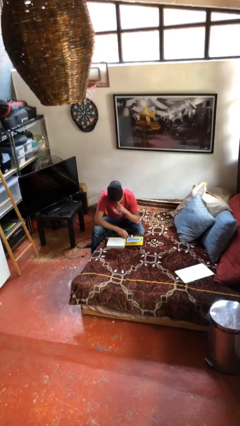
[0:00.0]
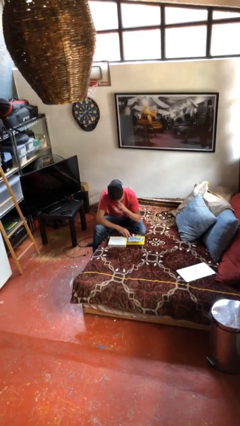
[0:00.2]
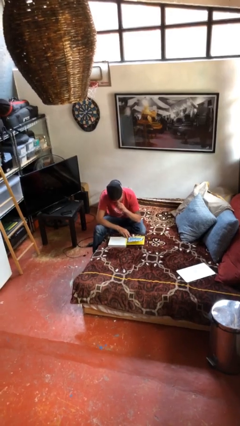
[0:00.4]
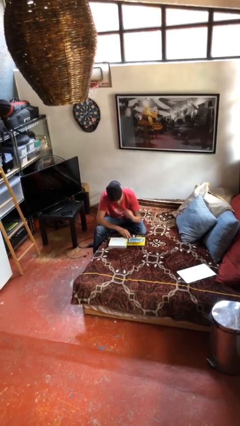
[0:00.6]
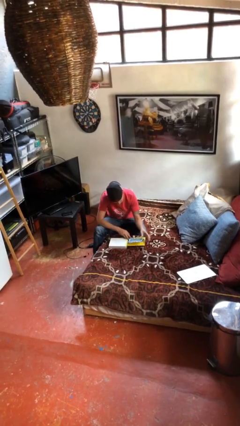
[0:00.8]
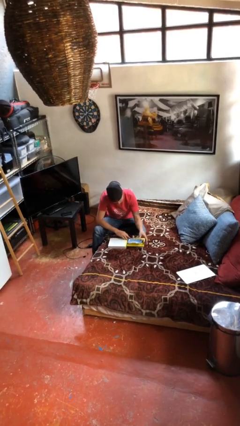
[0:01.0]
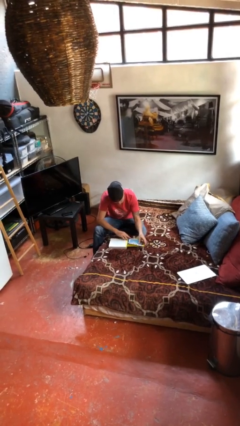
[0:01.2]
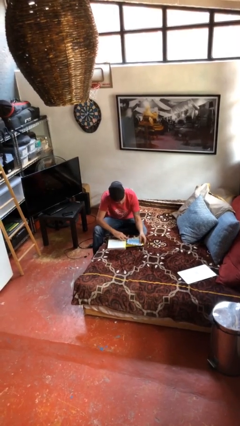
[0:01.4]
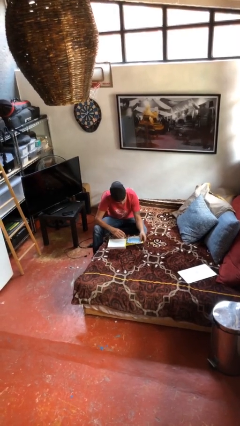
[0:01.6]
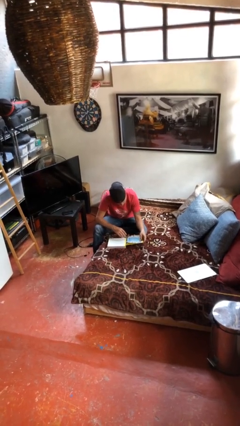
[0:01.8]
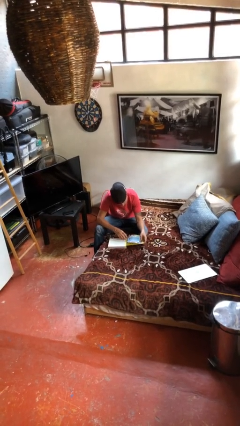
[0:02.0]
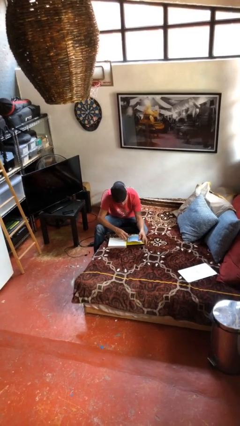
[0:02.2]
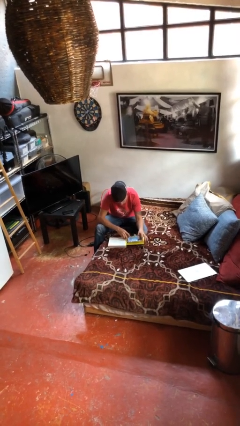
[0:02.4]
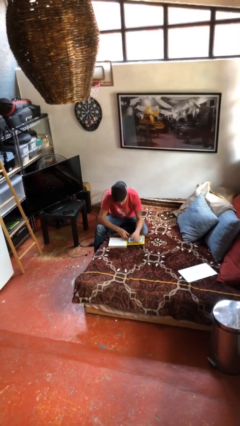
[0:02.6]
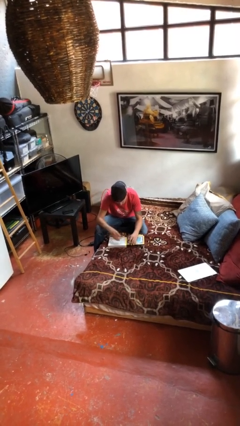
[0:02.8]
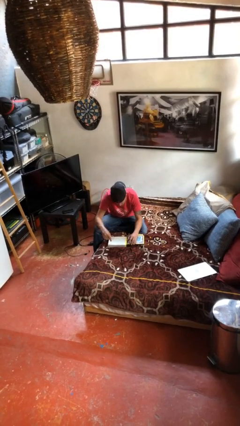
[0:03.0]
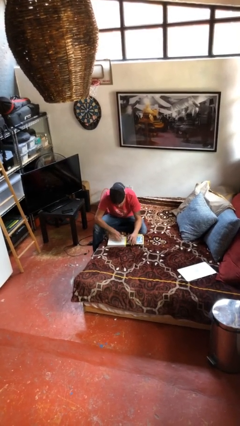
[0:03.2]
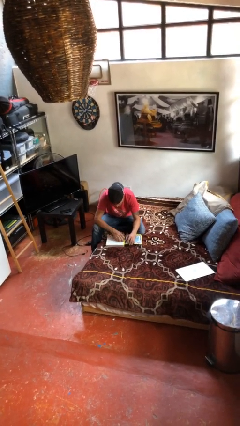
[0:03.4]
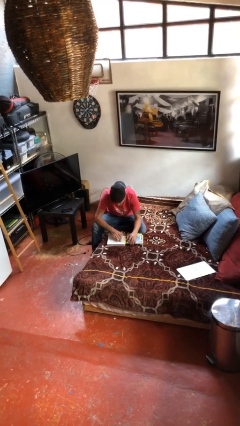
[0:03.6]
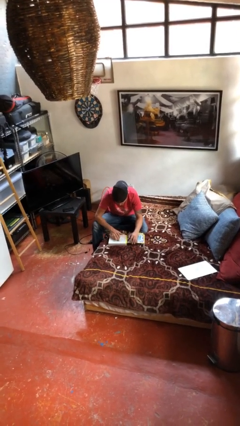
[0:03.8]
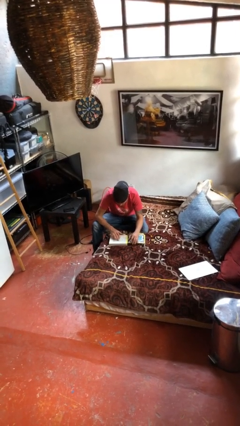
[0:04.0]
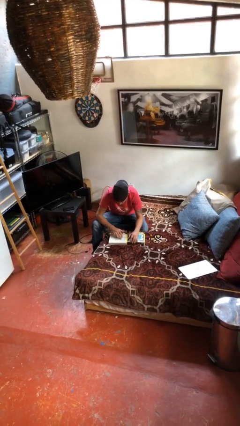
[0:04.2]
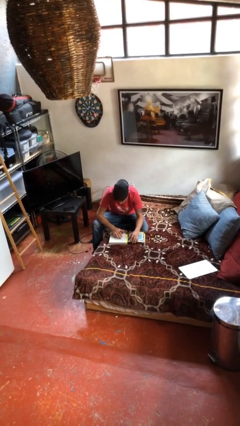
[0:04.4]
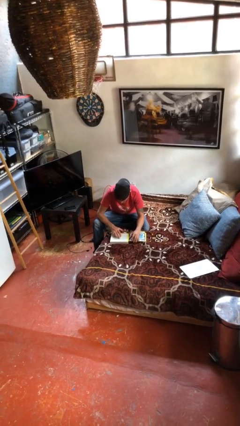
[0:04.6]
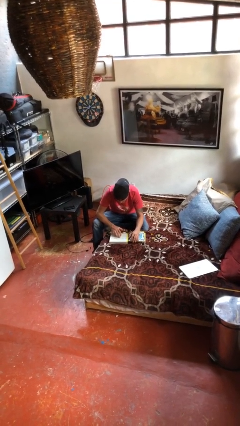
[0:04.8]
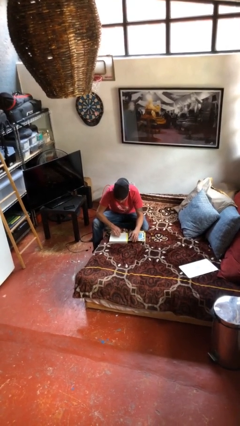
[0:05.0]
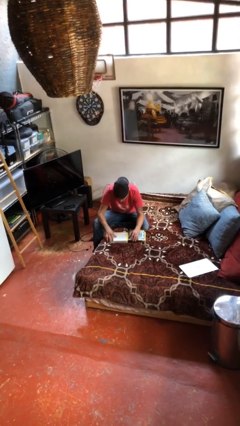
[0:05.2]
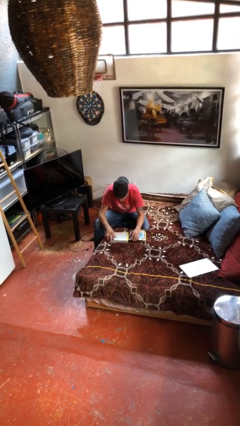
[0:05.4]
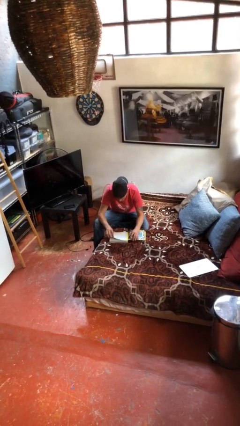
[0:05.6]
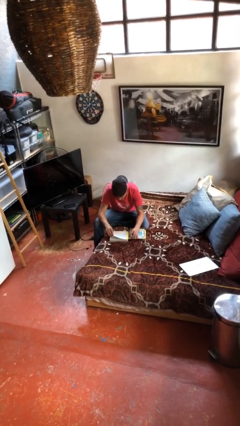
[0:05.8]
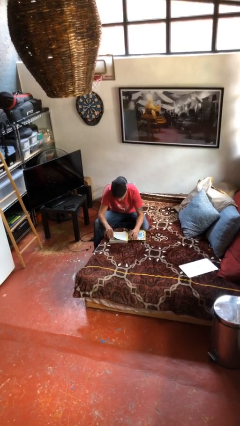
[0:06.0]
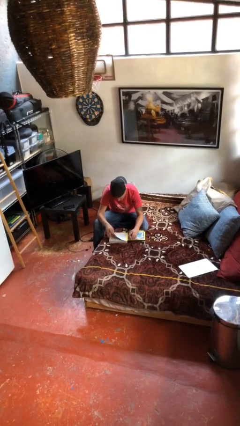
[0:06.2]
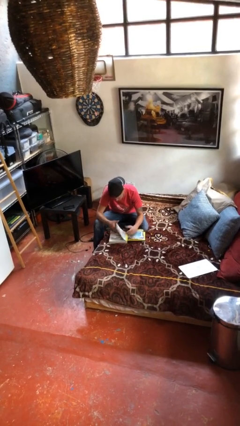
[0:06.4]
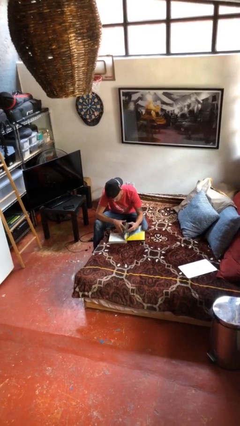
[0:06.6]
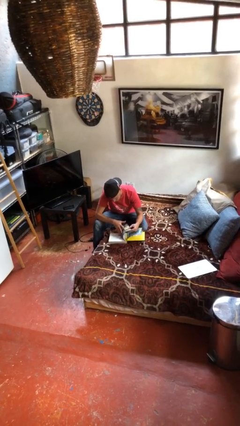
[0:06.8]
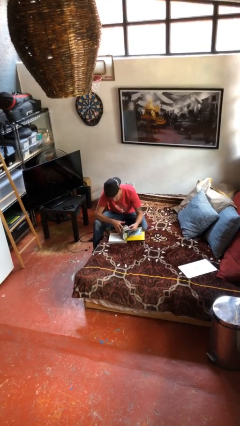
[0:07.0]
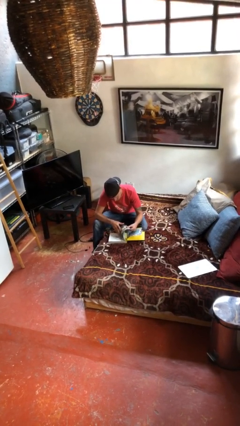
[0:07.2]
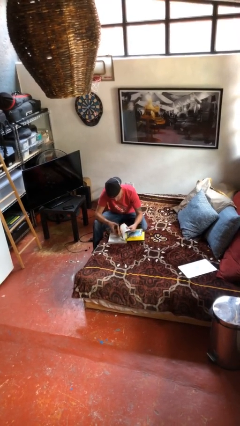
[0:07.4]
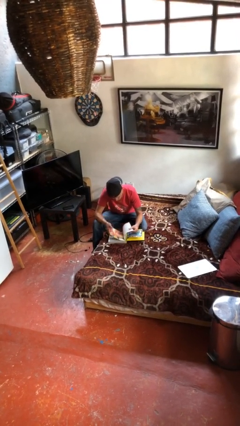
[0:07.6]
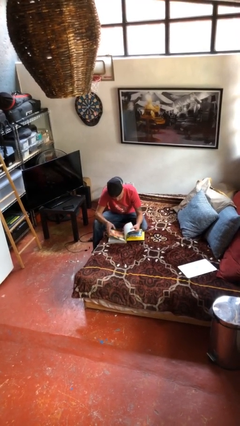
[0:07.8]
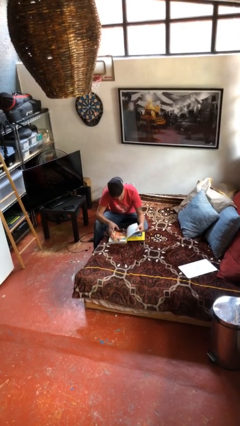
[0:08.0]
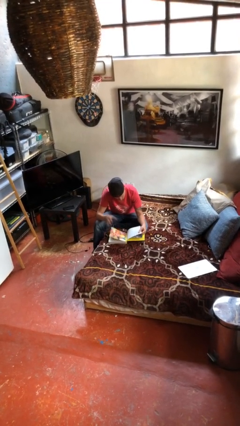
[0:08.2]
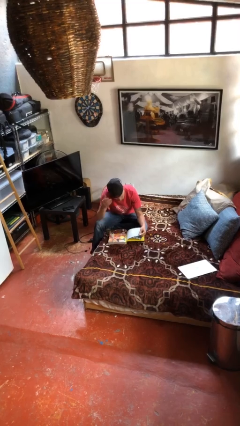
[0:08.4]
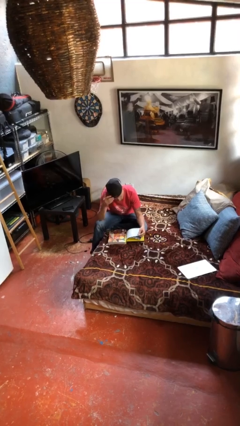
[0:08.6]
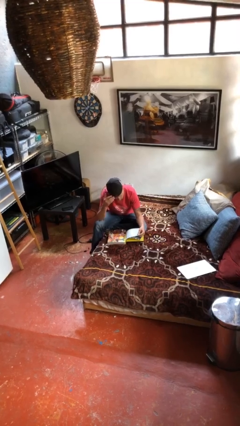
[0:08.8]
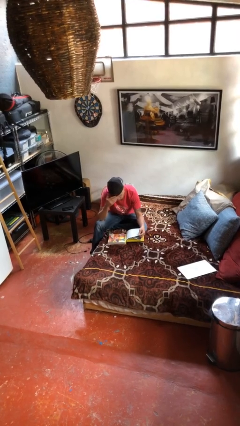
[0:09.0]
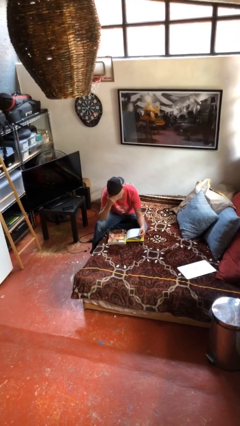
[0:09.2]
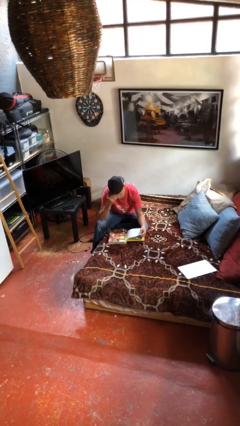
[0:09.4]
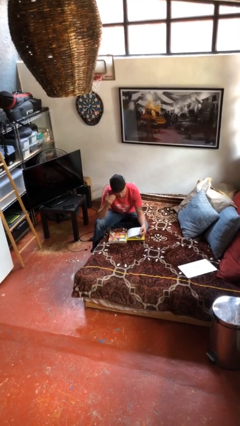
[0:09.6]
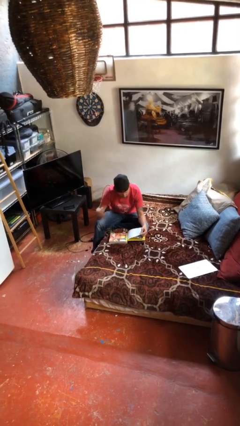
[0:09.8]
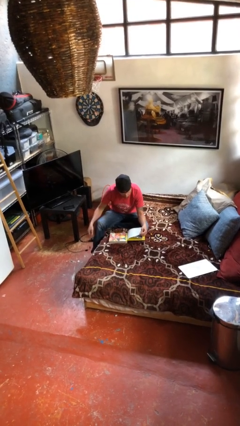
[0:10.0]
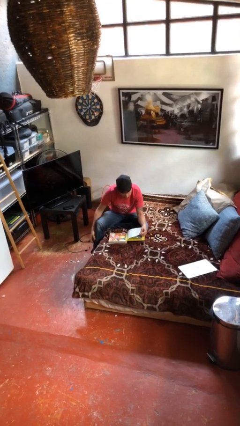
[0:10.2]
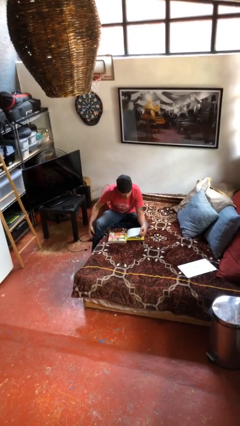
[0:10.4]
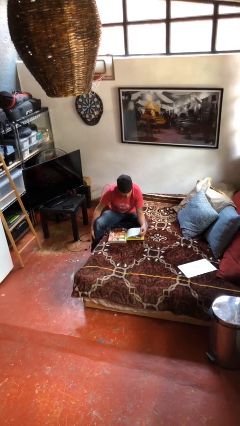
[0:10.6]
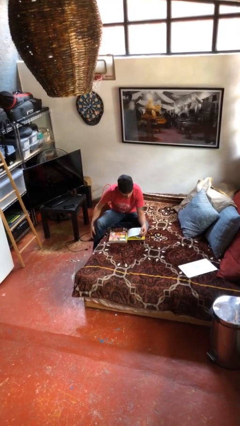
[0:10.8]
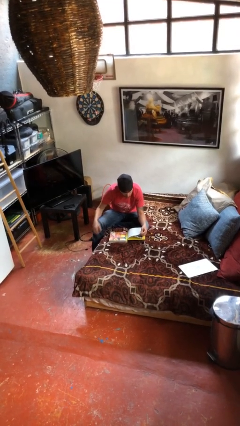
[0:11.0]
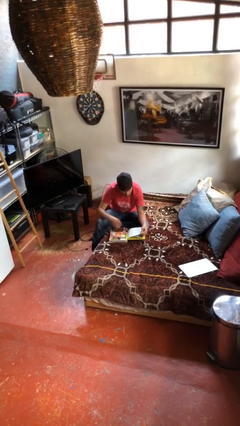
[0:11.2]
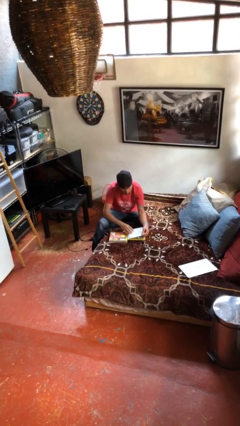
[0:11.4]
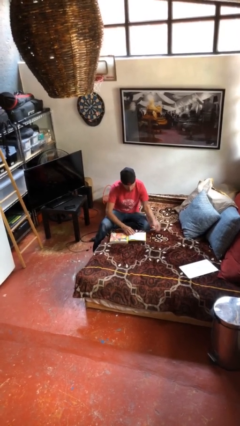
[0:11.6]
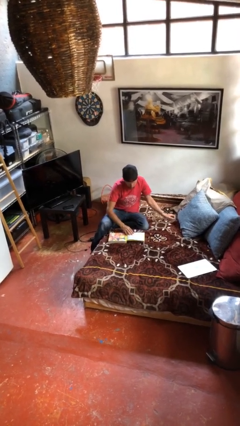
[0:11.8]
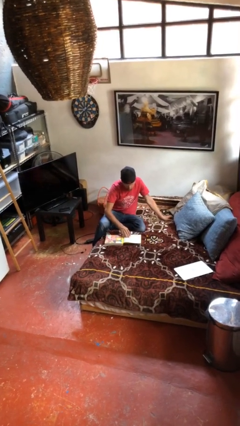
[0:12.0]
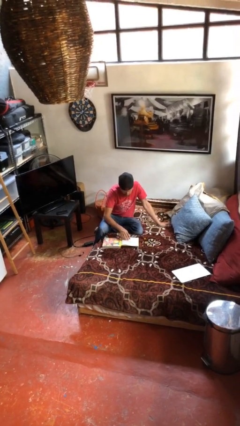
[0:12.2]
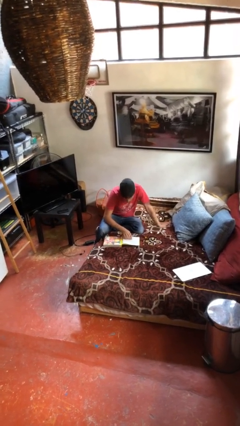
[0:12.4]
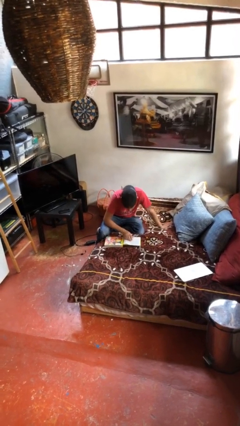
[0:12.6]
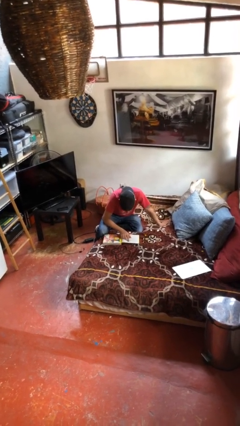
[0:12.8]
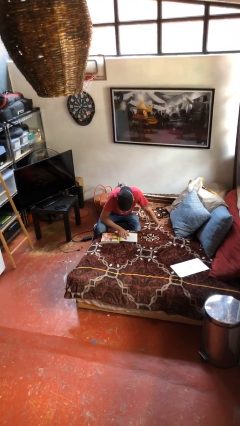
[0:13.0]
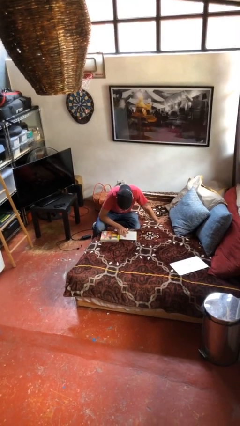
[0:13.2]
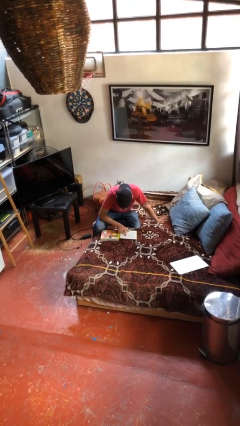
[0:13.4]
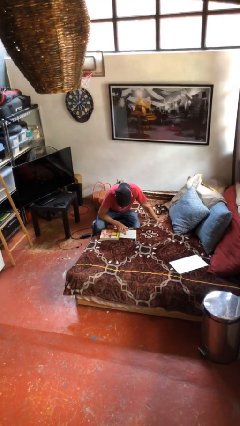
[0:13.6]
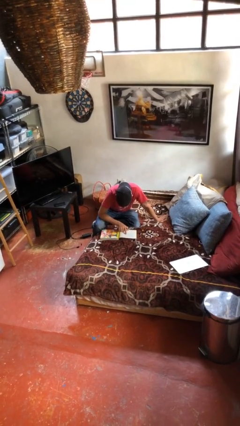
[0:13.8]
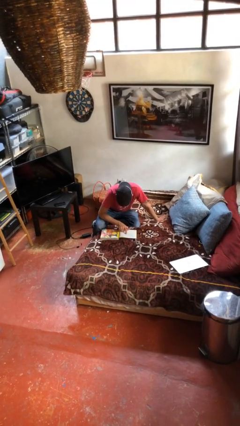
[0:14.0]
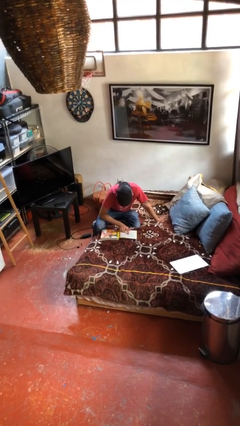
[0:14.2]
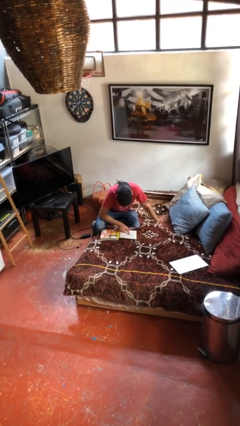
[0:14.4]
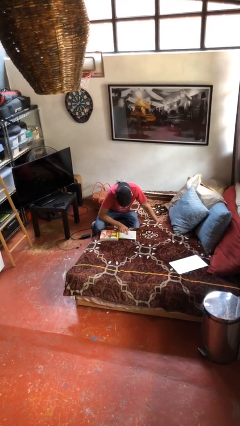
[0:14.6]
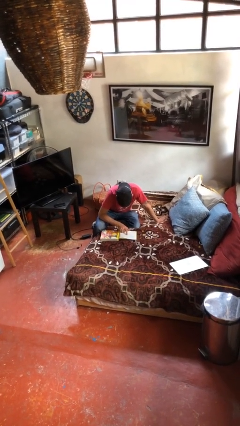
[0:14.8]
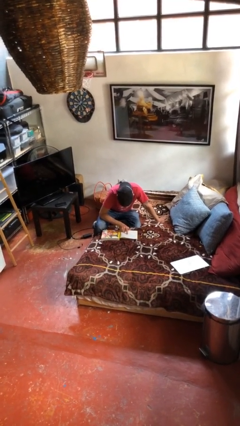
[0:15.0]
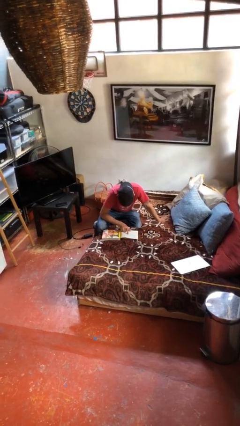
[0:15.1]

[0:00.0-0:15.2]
person reads document

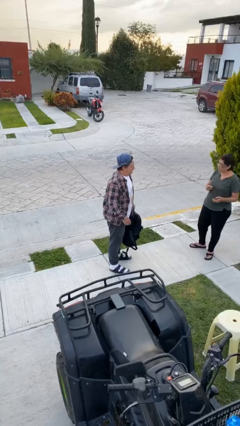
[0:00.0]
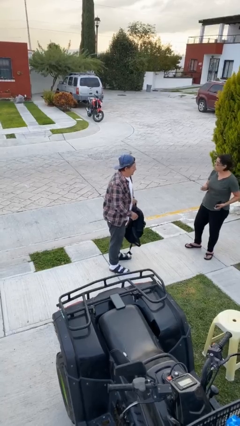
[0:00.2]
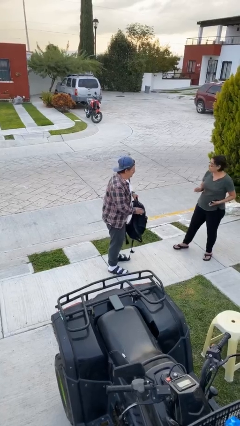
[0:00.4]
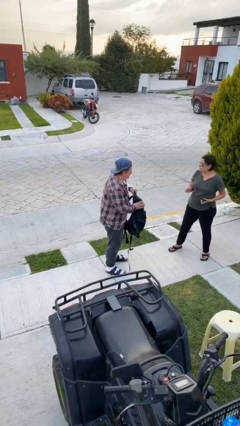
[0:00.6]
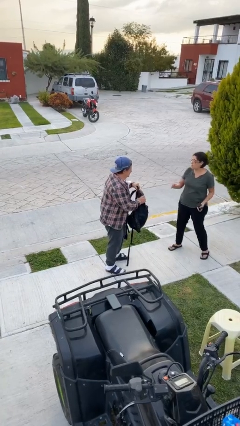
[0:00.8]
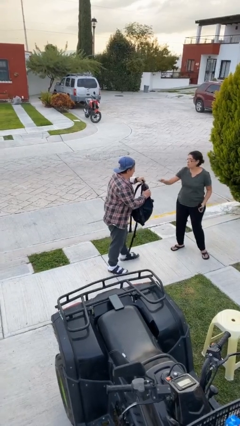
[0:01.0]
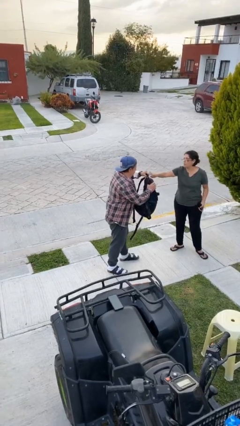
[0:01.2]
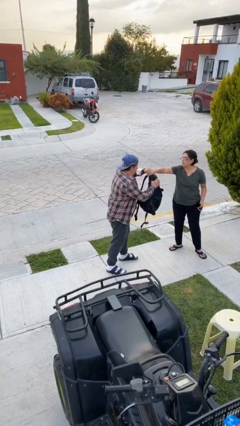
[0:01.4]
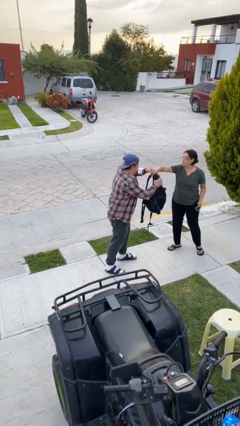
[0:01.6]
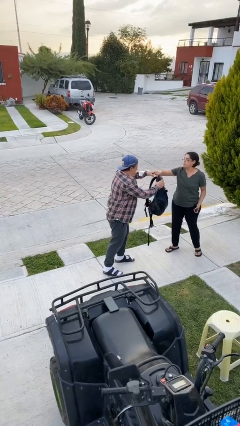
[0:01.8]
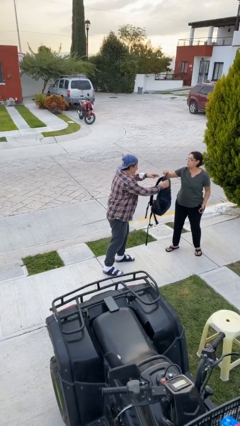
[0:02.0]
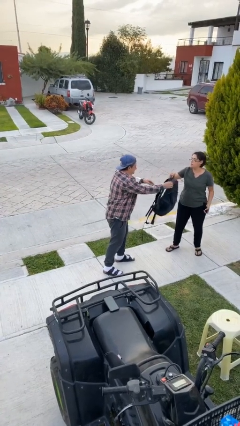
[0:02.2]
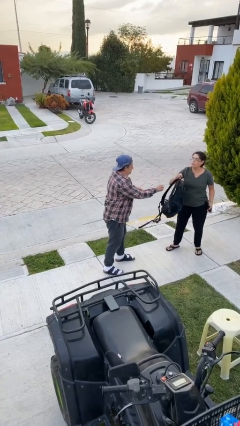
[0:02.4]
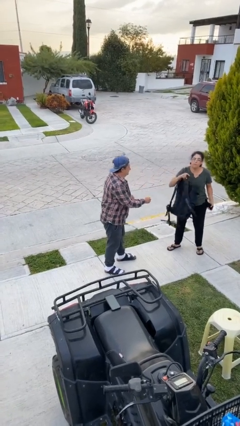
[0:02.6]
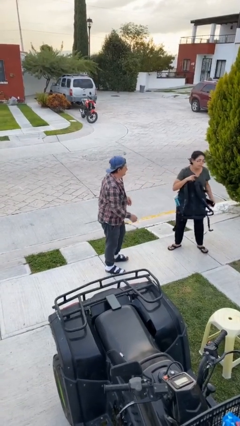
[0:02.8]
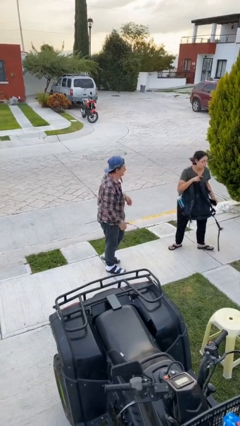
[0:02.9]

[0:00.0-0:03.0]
person transfers object to person

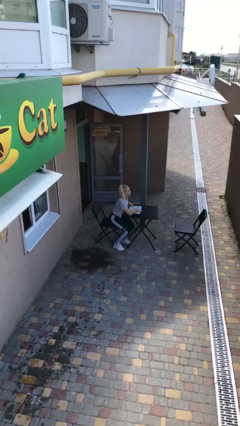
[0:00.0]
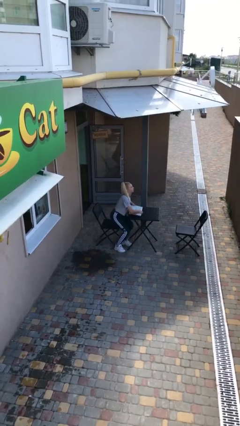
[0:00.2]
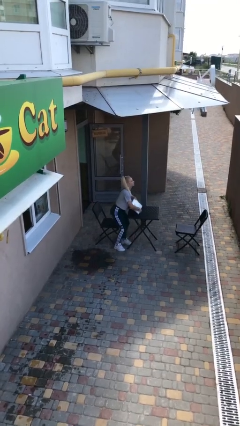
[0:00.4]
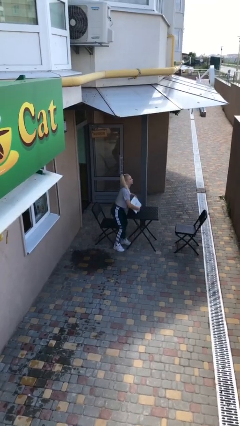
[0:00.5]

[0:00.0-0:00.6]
person stands up
